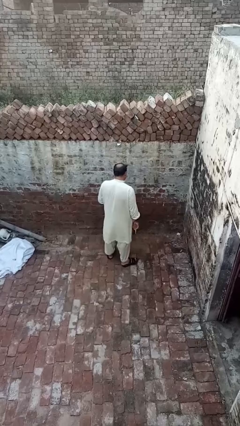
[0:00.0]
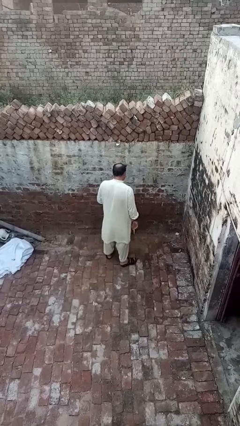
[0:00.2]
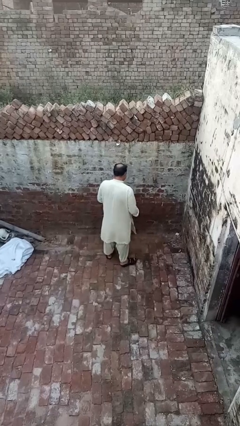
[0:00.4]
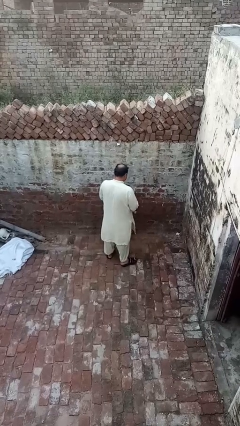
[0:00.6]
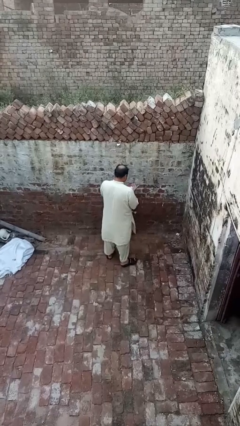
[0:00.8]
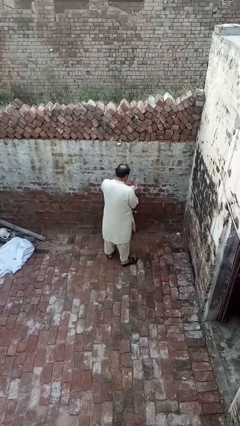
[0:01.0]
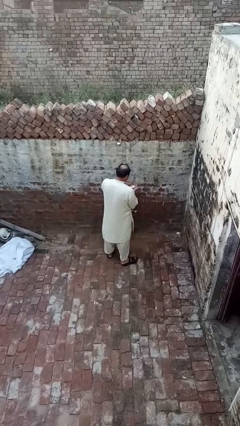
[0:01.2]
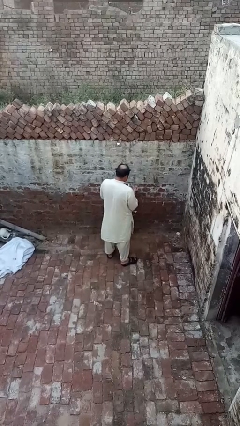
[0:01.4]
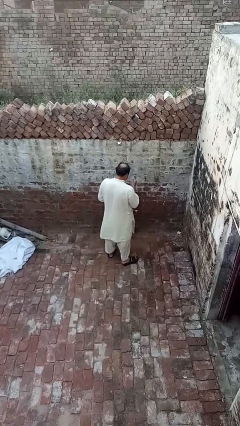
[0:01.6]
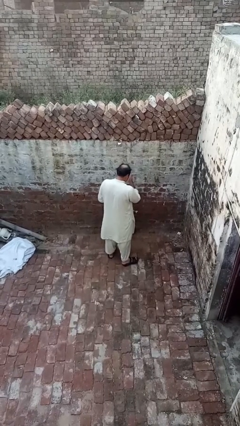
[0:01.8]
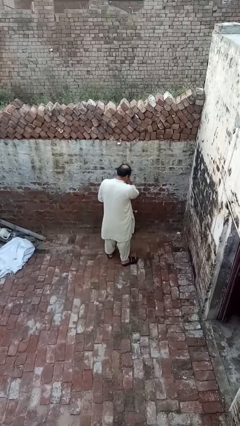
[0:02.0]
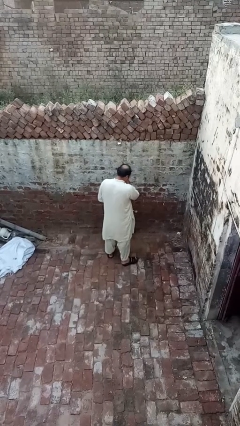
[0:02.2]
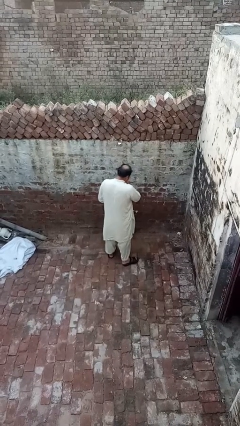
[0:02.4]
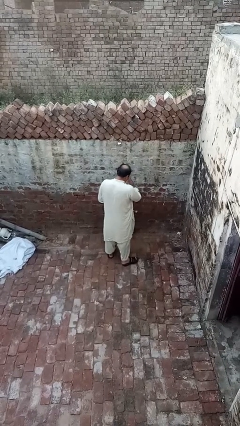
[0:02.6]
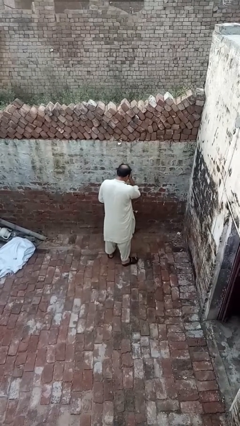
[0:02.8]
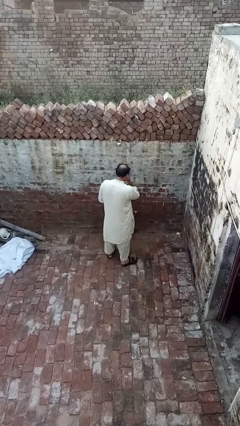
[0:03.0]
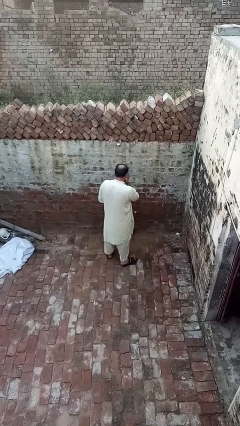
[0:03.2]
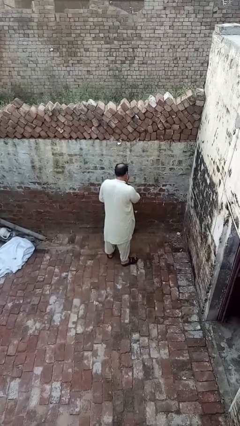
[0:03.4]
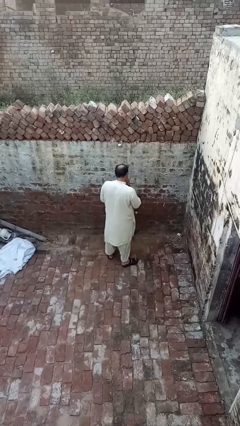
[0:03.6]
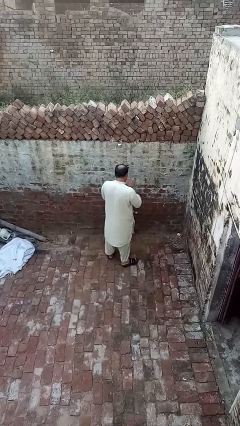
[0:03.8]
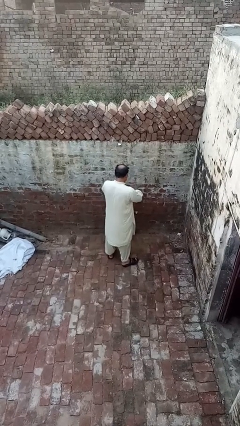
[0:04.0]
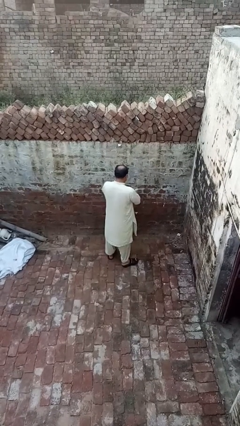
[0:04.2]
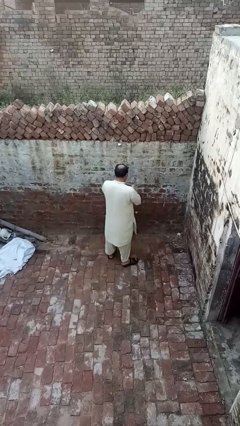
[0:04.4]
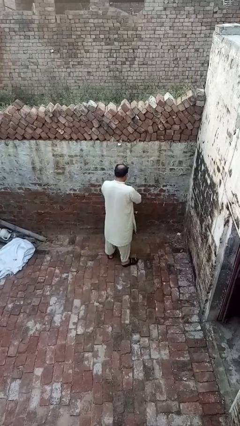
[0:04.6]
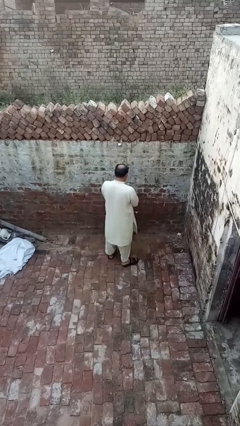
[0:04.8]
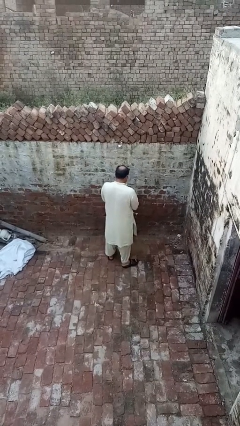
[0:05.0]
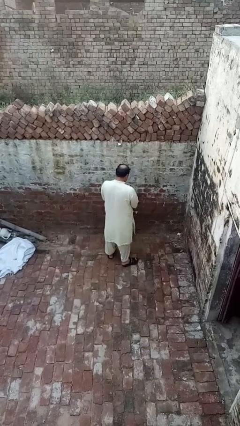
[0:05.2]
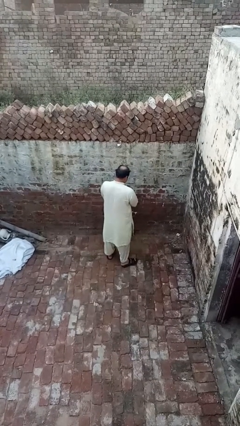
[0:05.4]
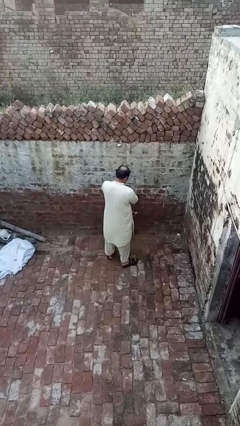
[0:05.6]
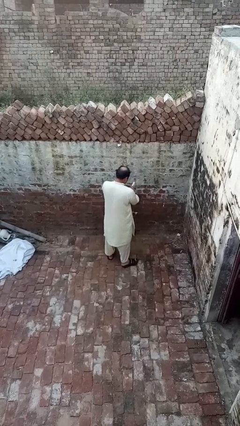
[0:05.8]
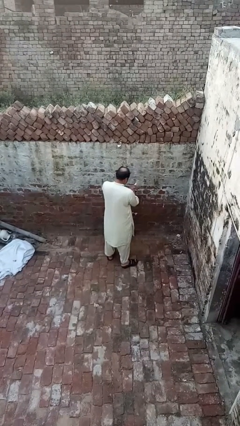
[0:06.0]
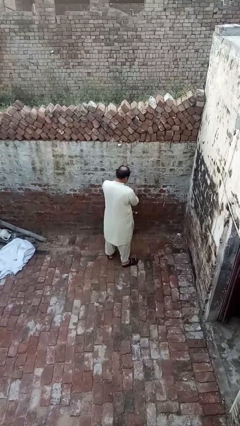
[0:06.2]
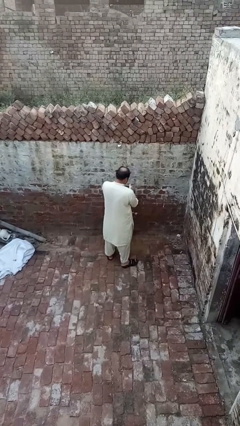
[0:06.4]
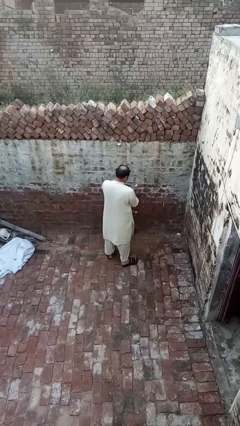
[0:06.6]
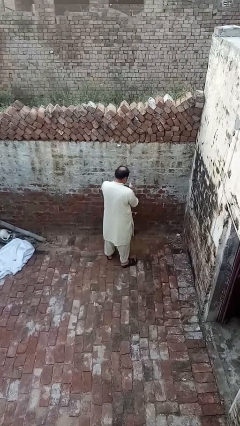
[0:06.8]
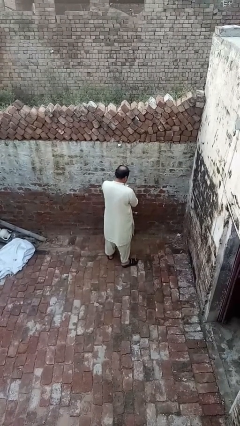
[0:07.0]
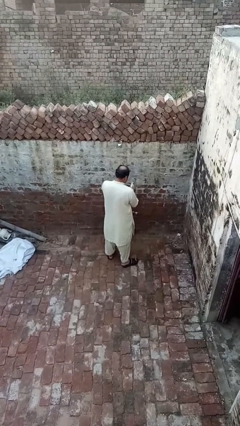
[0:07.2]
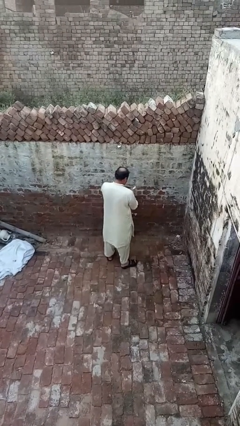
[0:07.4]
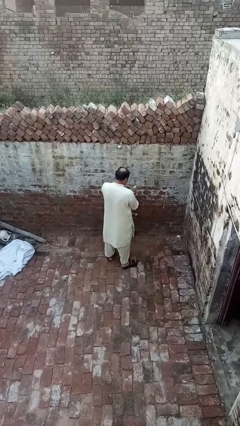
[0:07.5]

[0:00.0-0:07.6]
person applies sunscreen

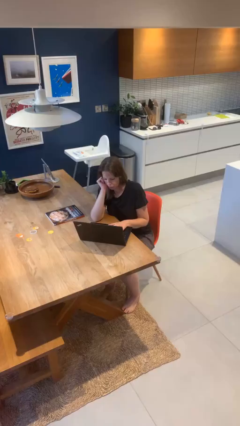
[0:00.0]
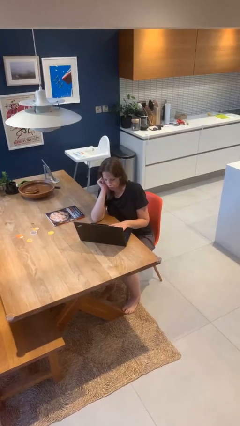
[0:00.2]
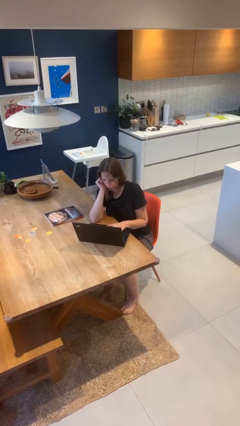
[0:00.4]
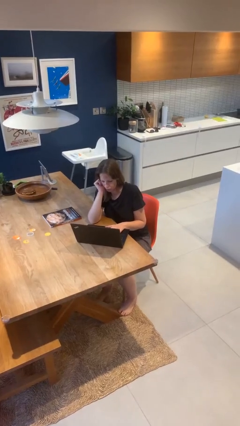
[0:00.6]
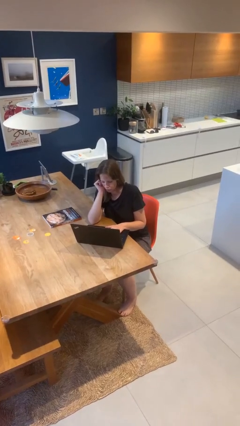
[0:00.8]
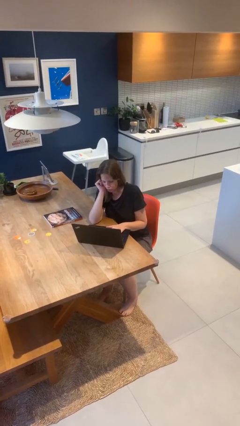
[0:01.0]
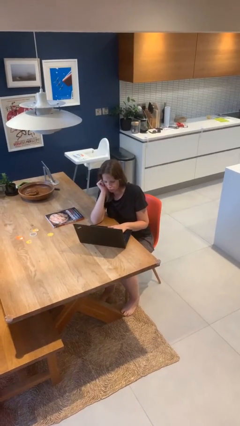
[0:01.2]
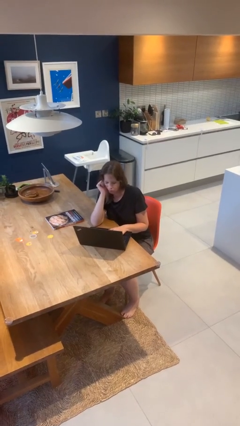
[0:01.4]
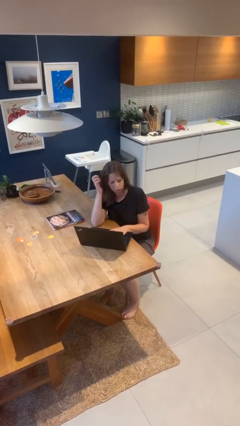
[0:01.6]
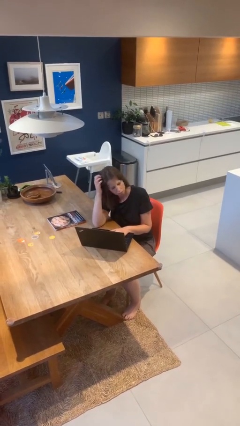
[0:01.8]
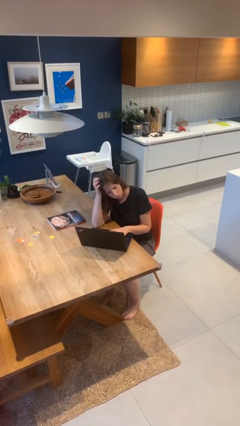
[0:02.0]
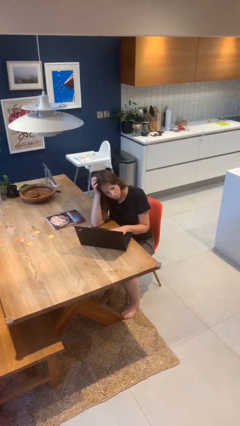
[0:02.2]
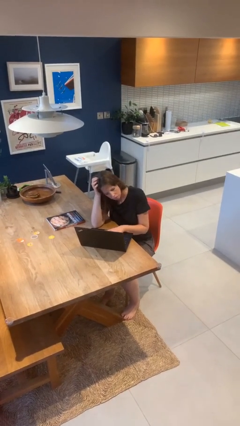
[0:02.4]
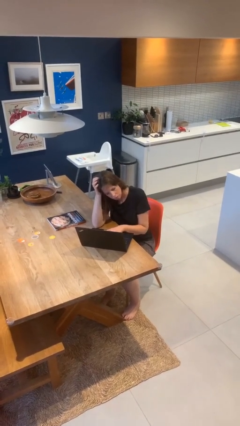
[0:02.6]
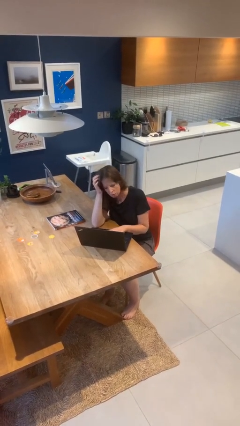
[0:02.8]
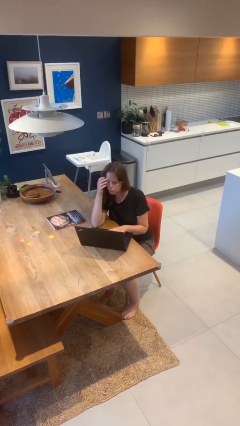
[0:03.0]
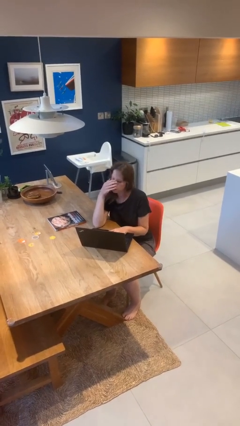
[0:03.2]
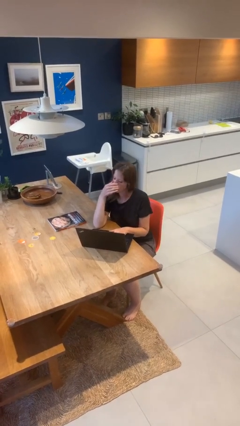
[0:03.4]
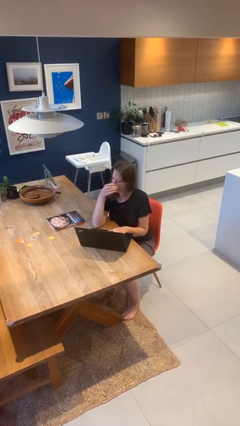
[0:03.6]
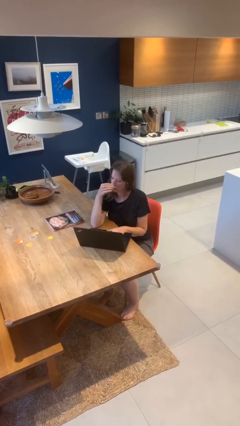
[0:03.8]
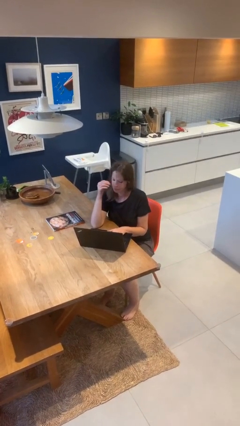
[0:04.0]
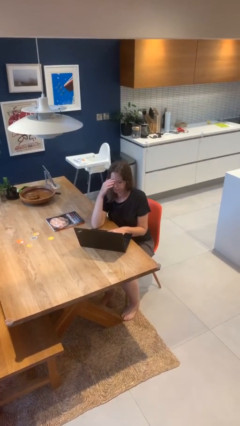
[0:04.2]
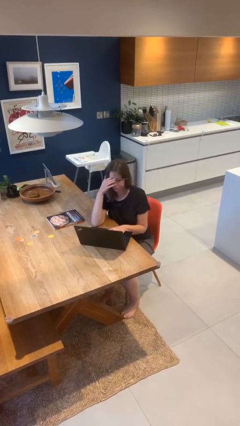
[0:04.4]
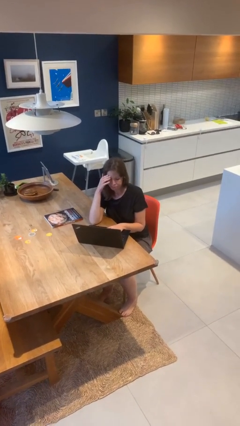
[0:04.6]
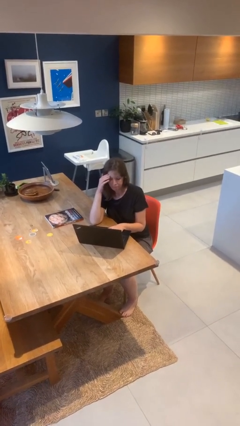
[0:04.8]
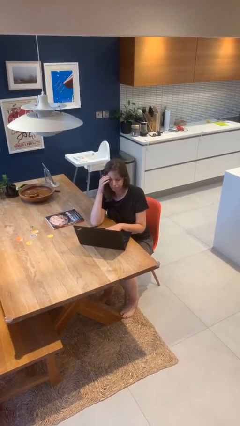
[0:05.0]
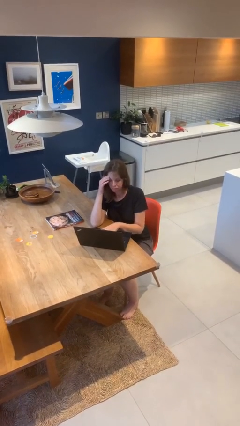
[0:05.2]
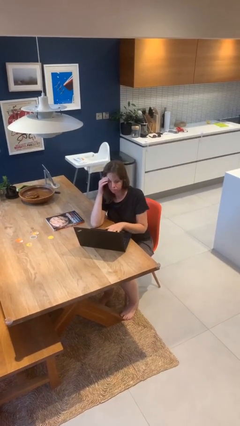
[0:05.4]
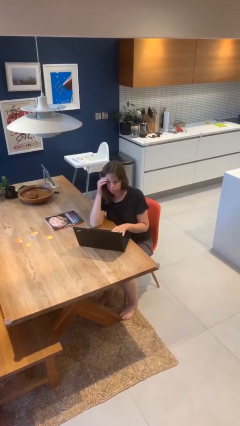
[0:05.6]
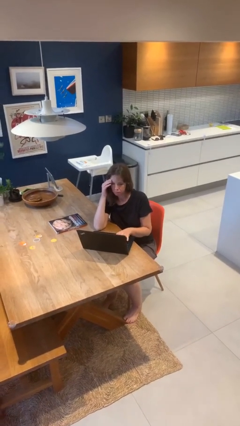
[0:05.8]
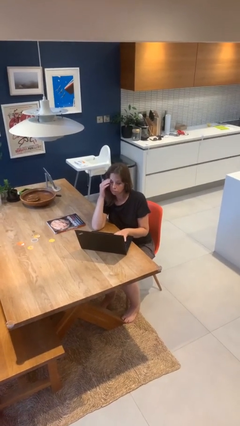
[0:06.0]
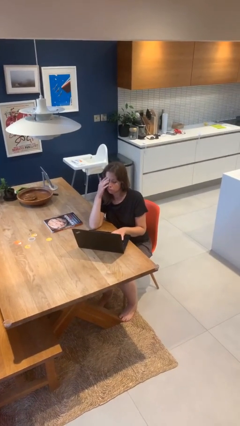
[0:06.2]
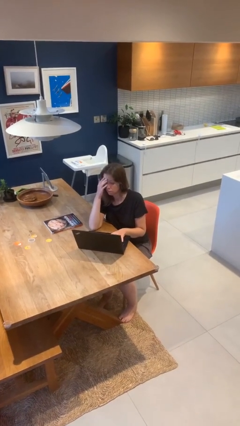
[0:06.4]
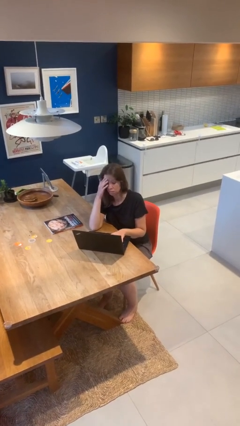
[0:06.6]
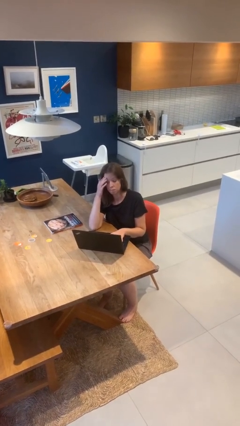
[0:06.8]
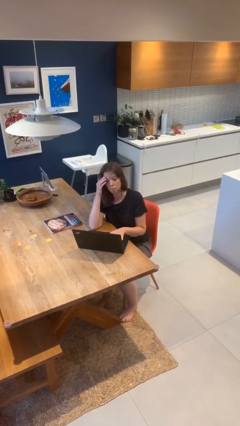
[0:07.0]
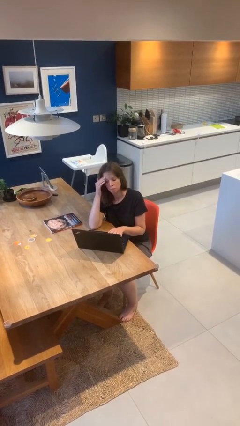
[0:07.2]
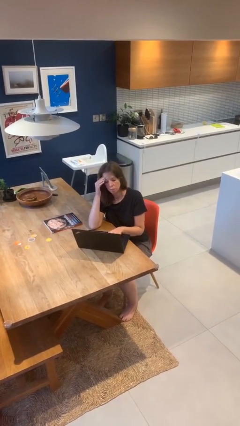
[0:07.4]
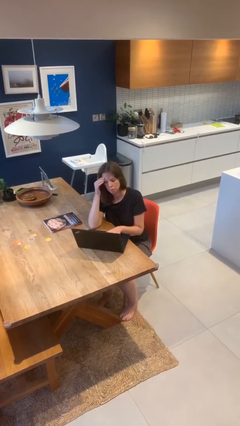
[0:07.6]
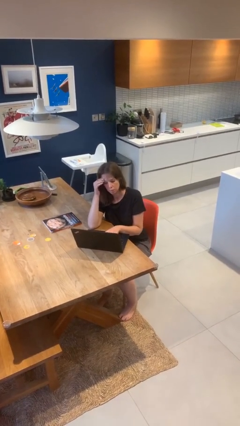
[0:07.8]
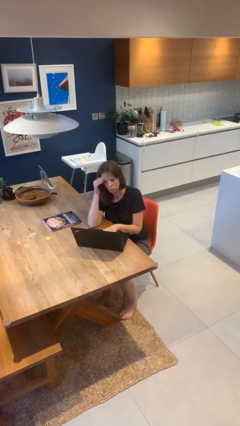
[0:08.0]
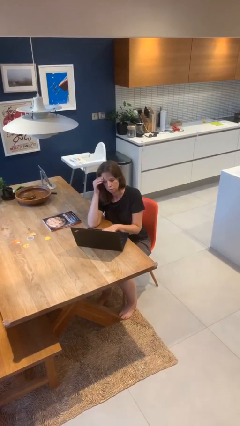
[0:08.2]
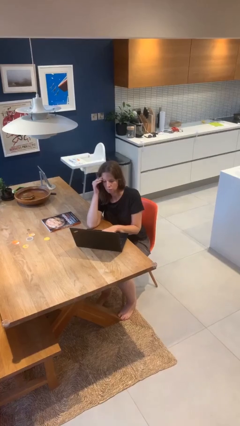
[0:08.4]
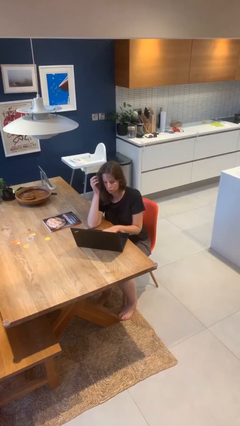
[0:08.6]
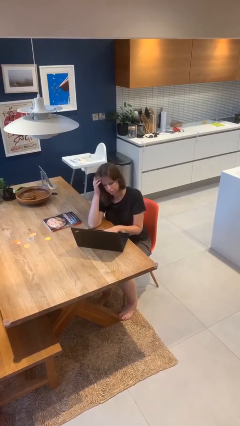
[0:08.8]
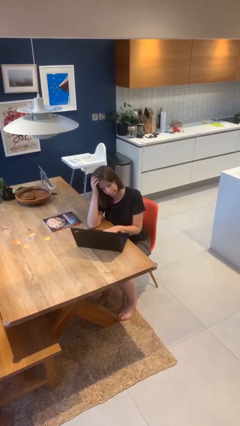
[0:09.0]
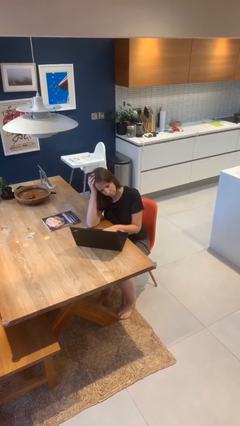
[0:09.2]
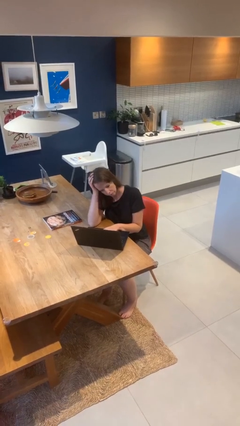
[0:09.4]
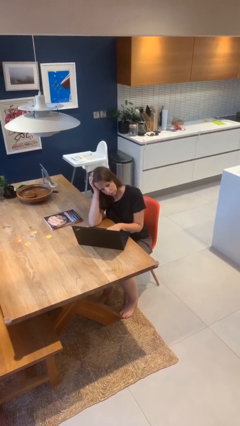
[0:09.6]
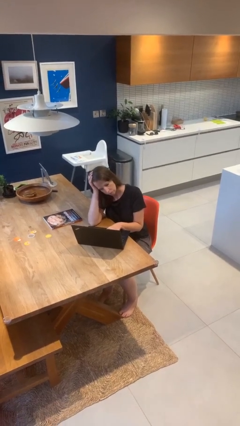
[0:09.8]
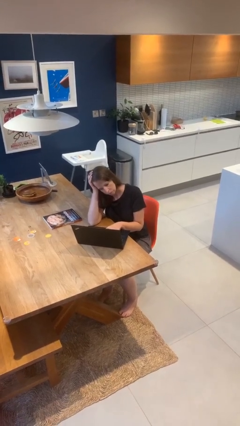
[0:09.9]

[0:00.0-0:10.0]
person interacts with laptop

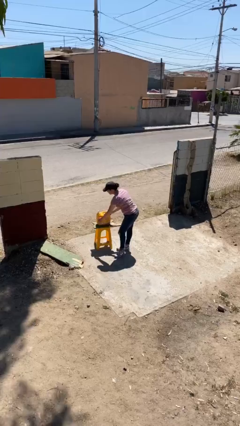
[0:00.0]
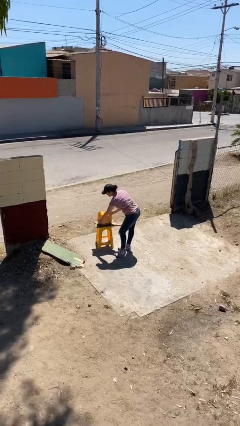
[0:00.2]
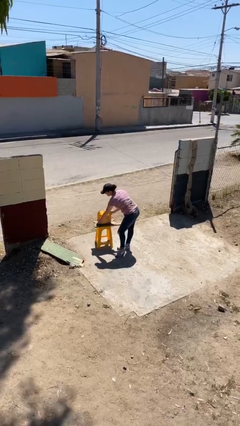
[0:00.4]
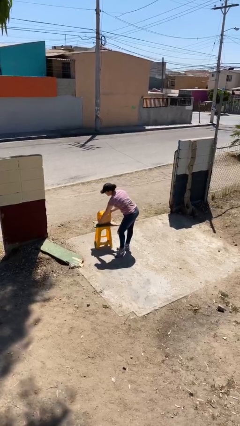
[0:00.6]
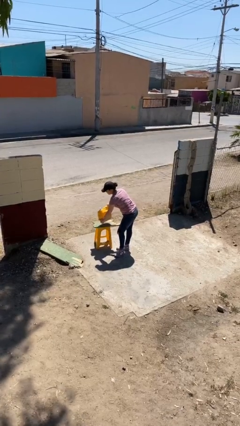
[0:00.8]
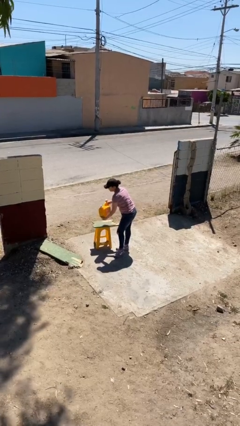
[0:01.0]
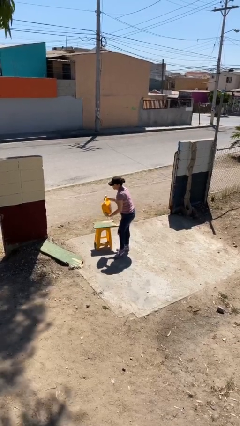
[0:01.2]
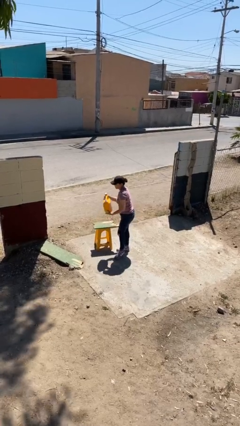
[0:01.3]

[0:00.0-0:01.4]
person picks up object from table
